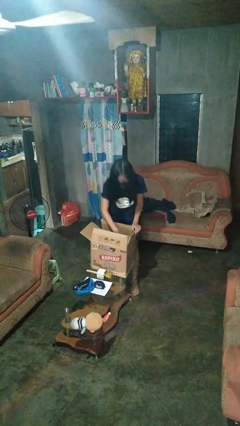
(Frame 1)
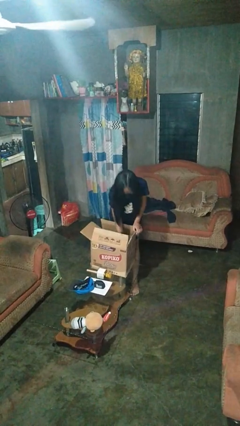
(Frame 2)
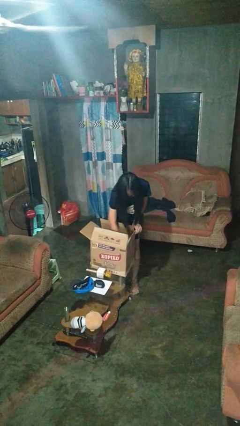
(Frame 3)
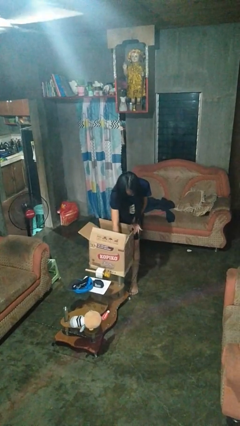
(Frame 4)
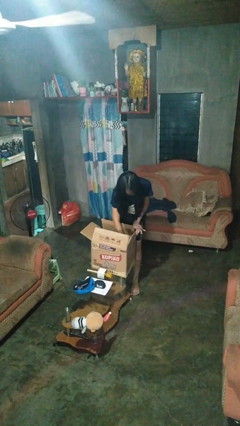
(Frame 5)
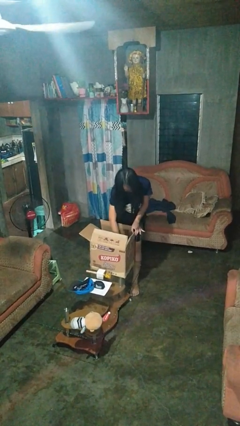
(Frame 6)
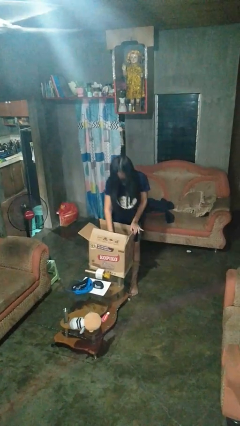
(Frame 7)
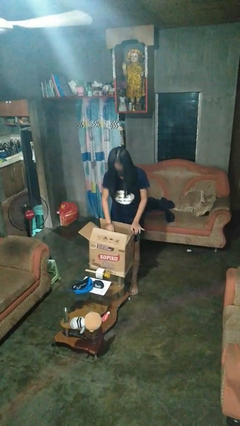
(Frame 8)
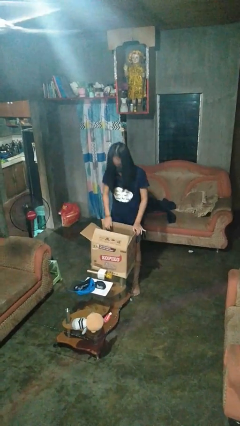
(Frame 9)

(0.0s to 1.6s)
person searches in box

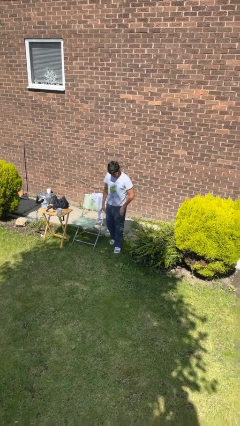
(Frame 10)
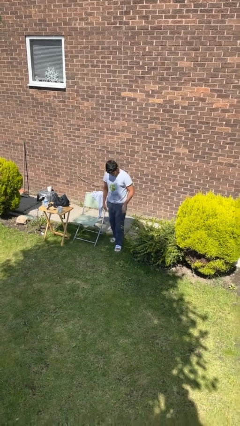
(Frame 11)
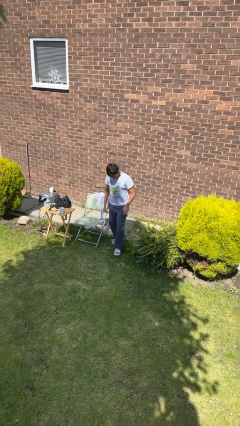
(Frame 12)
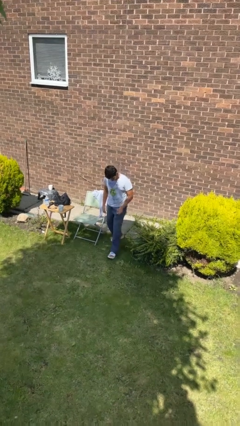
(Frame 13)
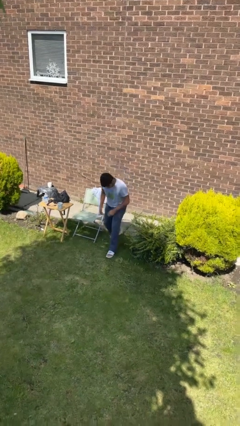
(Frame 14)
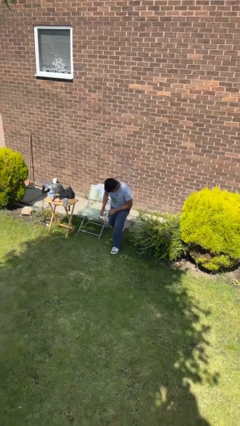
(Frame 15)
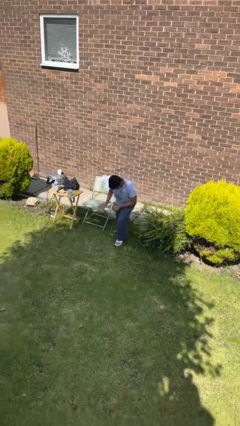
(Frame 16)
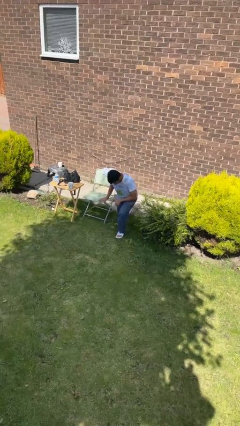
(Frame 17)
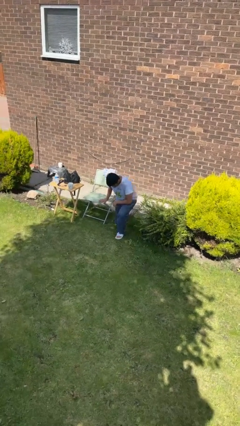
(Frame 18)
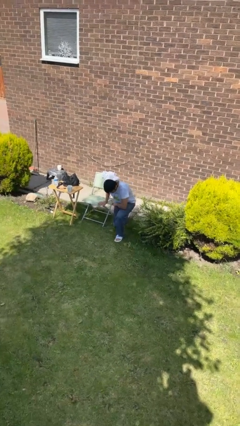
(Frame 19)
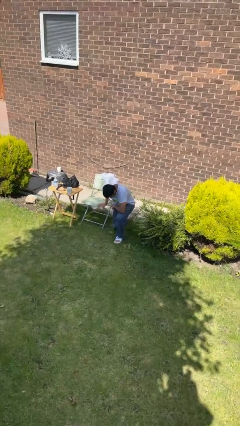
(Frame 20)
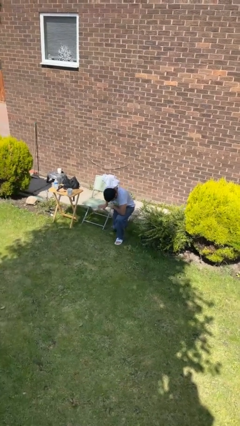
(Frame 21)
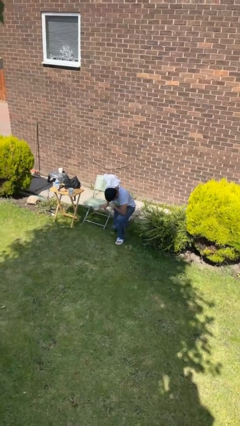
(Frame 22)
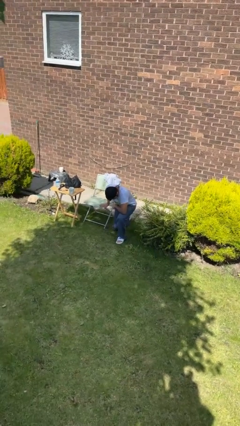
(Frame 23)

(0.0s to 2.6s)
person kneels

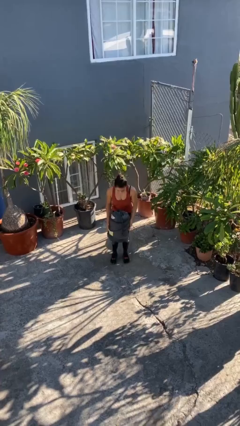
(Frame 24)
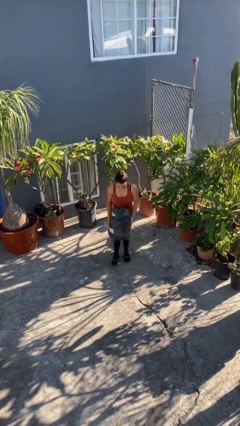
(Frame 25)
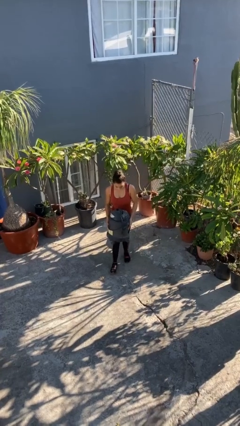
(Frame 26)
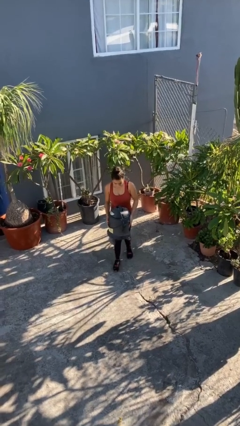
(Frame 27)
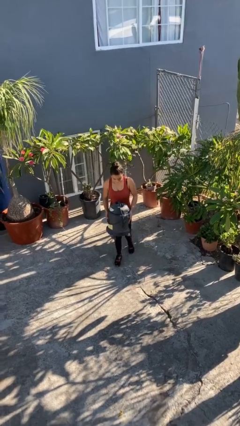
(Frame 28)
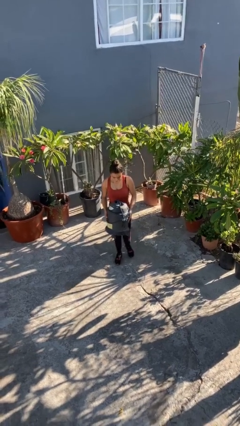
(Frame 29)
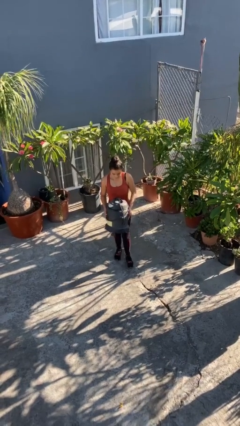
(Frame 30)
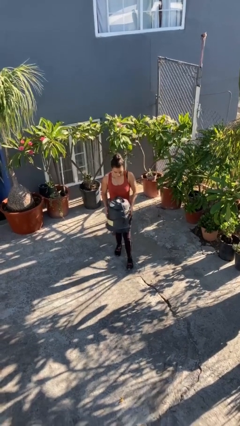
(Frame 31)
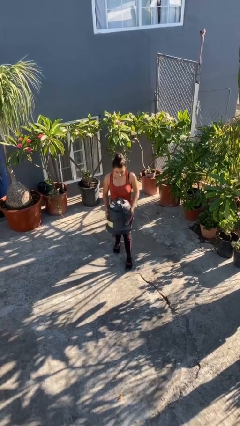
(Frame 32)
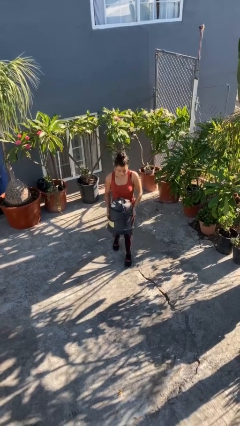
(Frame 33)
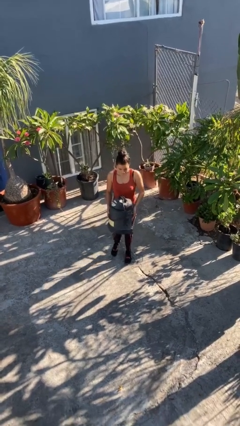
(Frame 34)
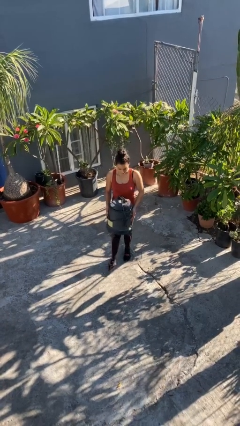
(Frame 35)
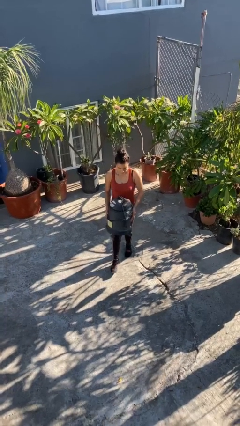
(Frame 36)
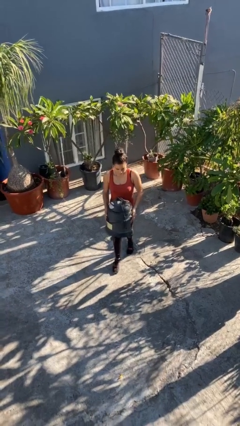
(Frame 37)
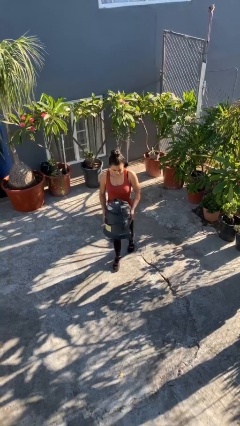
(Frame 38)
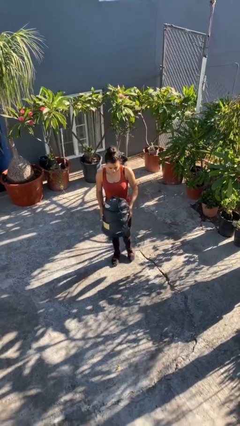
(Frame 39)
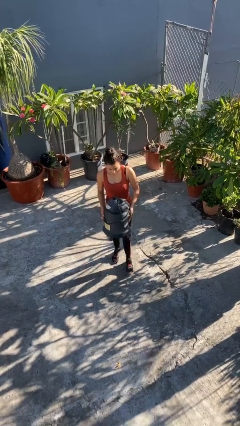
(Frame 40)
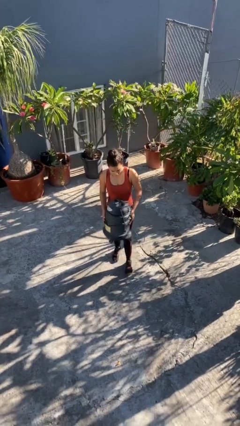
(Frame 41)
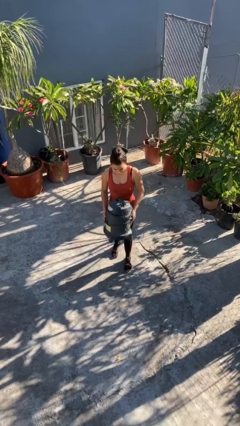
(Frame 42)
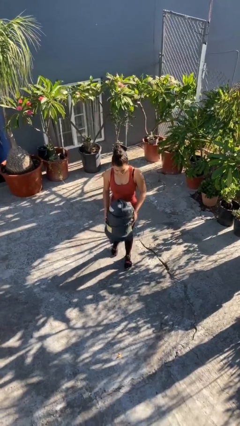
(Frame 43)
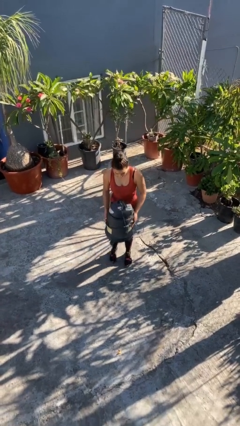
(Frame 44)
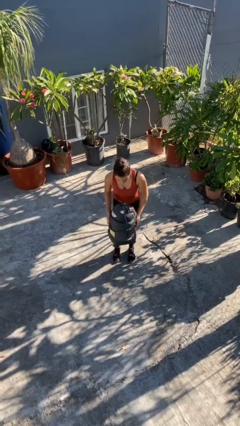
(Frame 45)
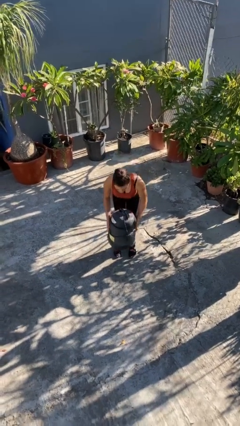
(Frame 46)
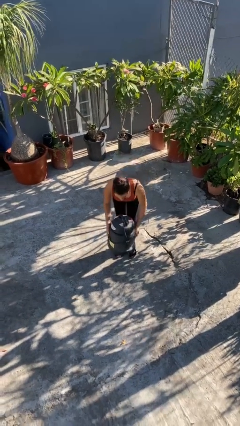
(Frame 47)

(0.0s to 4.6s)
person carries heavy object

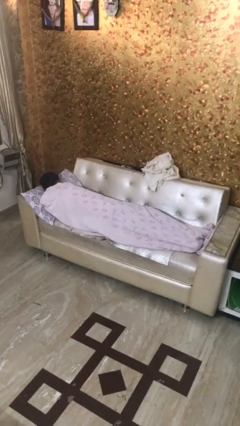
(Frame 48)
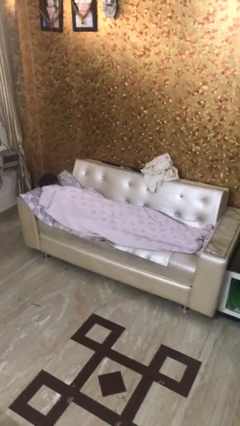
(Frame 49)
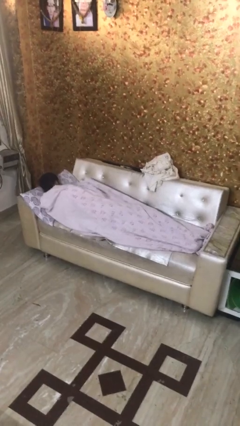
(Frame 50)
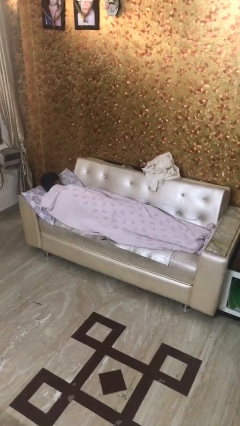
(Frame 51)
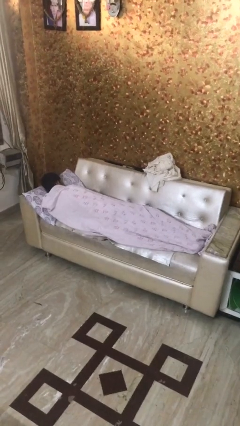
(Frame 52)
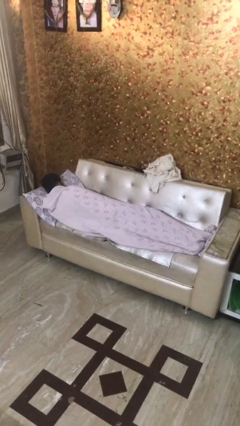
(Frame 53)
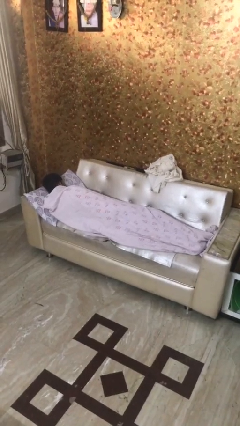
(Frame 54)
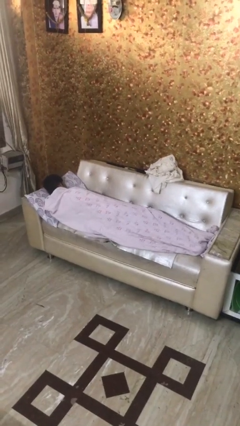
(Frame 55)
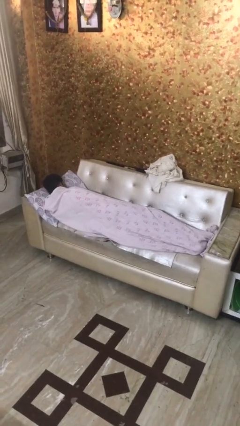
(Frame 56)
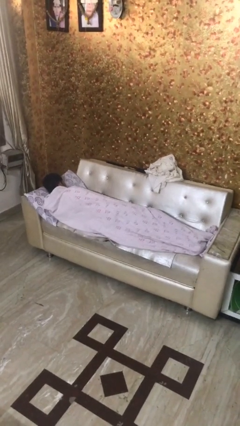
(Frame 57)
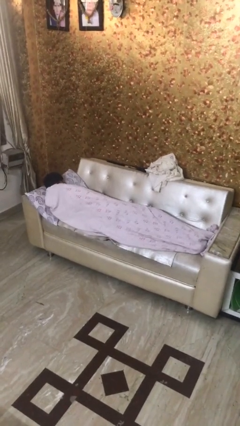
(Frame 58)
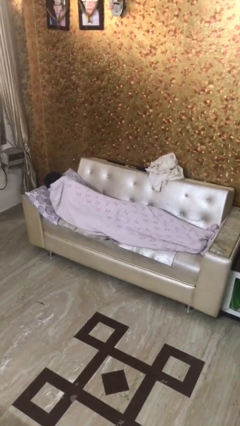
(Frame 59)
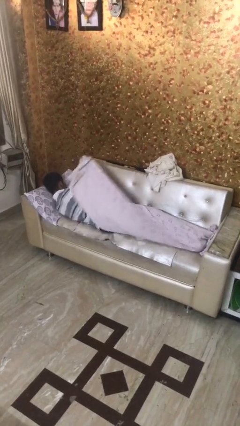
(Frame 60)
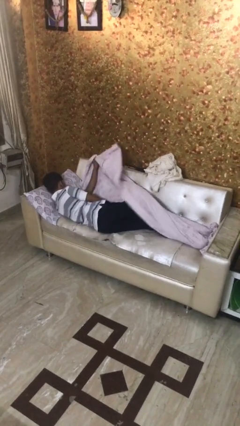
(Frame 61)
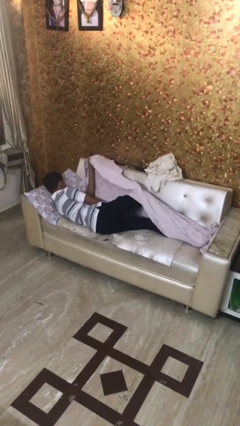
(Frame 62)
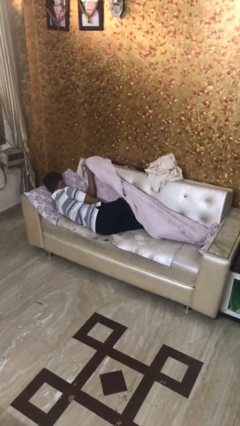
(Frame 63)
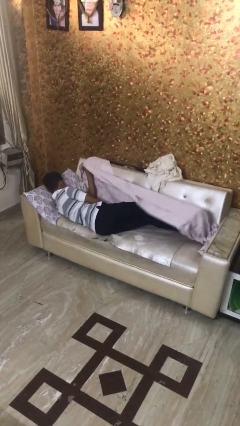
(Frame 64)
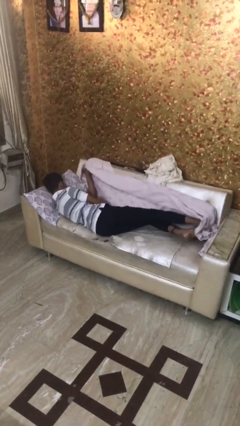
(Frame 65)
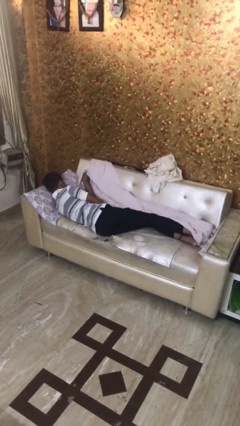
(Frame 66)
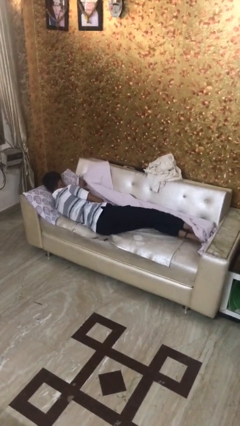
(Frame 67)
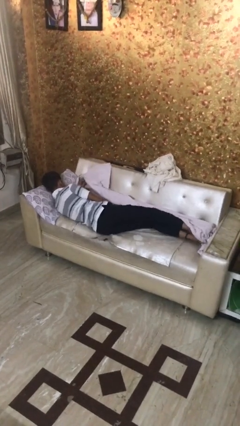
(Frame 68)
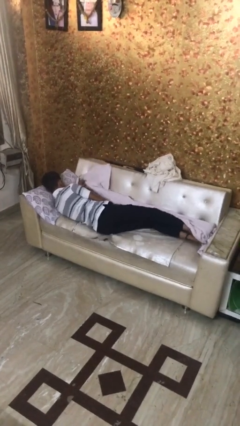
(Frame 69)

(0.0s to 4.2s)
person uncovers with bedsheets

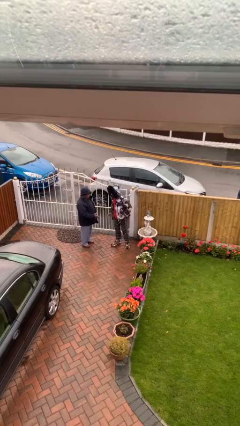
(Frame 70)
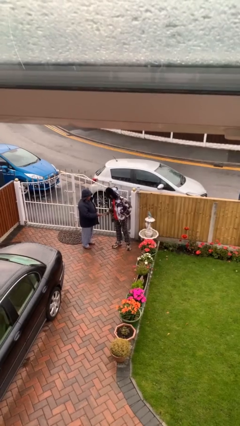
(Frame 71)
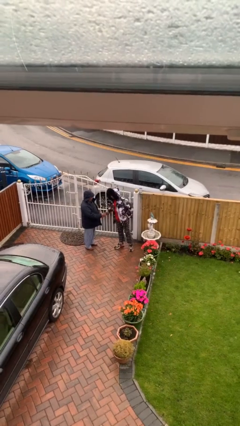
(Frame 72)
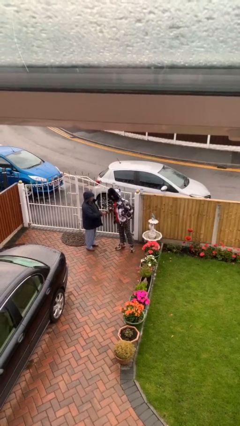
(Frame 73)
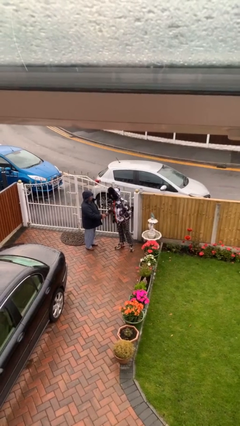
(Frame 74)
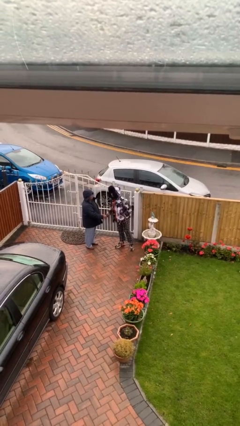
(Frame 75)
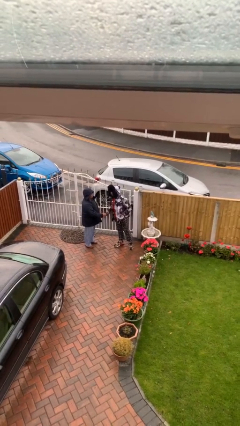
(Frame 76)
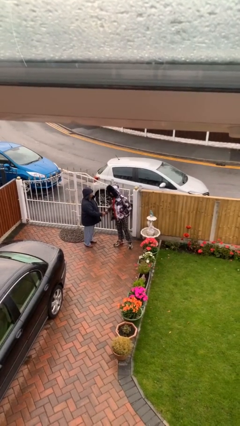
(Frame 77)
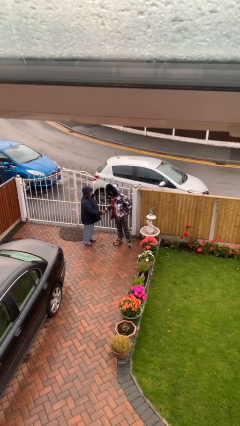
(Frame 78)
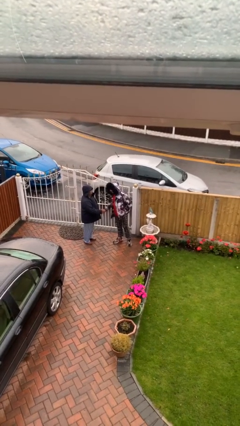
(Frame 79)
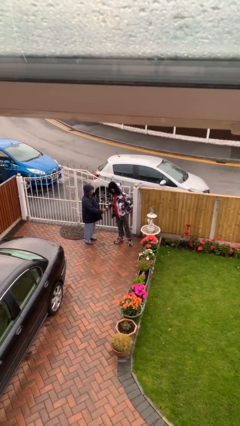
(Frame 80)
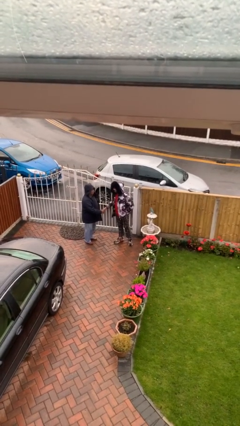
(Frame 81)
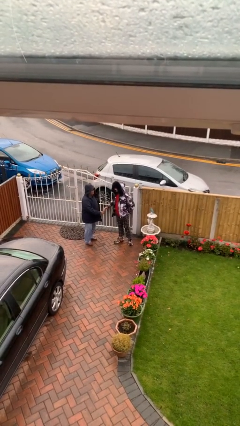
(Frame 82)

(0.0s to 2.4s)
person shakes hand

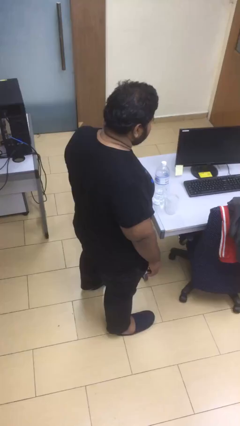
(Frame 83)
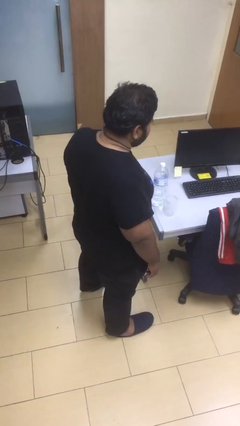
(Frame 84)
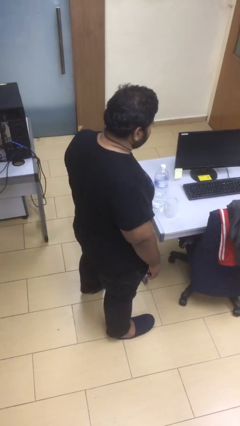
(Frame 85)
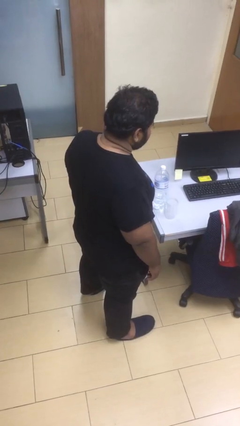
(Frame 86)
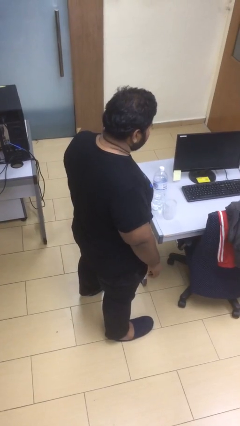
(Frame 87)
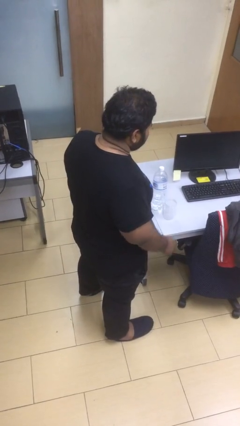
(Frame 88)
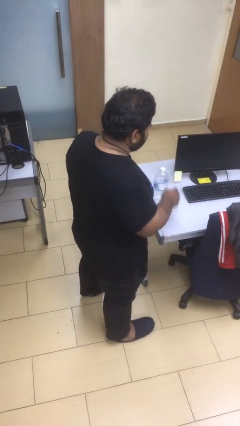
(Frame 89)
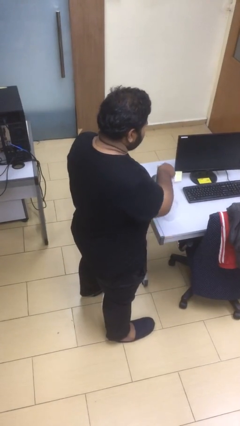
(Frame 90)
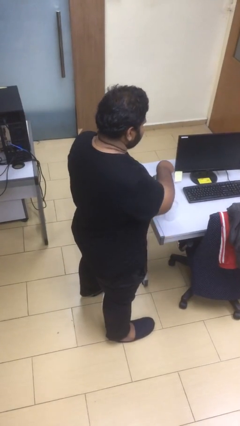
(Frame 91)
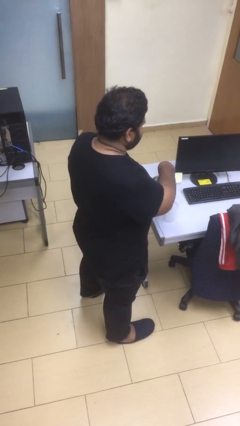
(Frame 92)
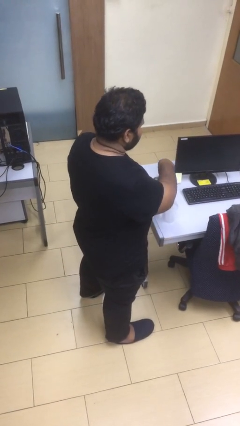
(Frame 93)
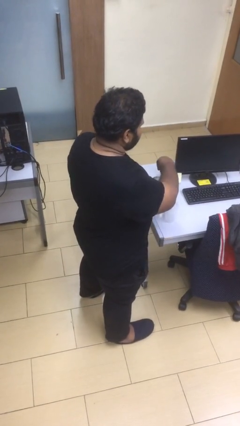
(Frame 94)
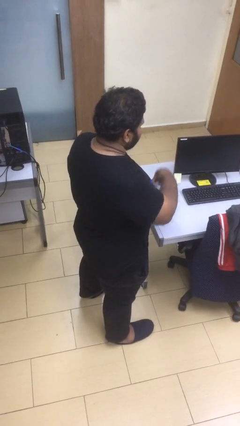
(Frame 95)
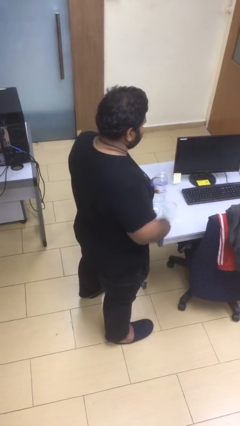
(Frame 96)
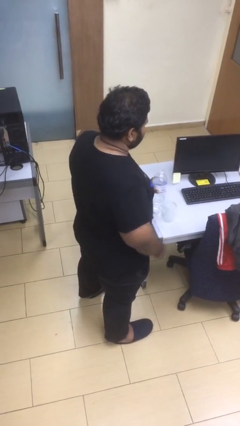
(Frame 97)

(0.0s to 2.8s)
person unscrews lid from bottle
